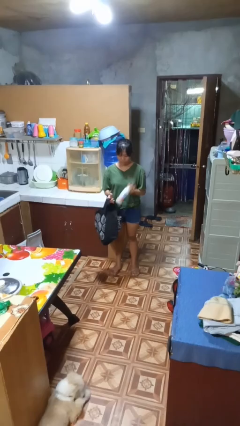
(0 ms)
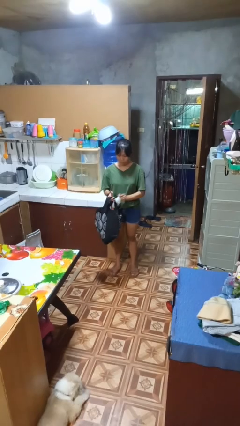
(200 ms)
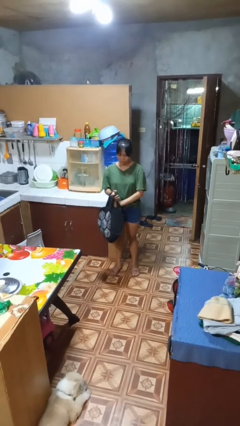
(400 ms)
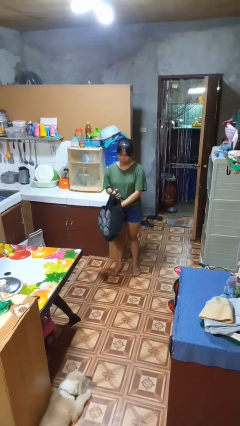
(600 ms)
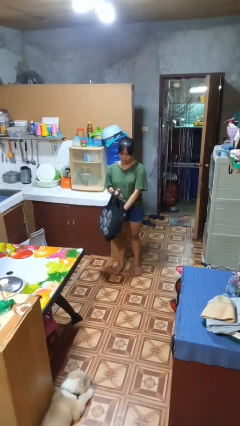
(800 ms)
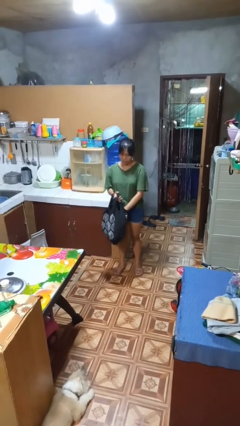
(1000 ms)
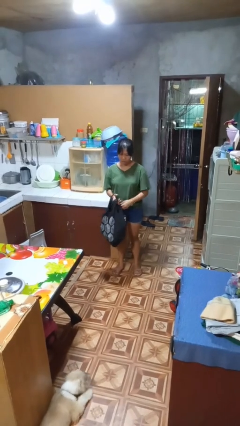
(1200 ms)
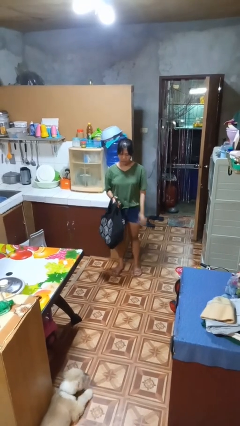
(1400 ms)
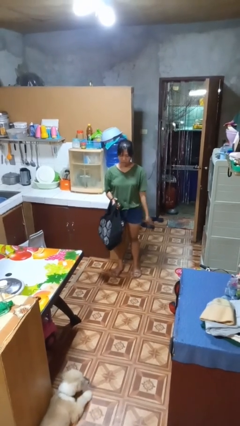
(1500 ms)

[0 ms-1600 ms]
person puts object into bag

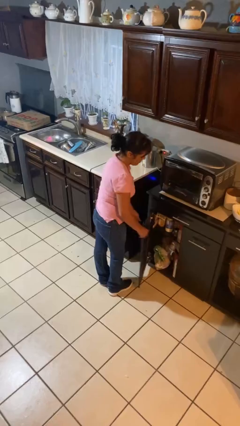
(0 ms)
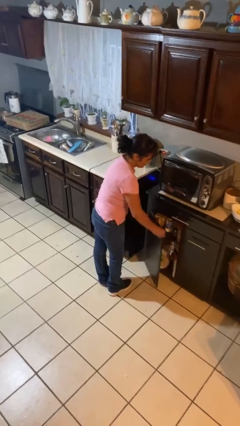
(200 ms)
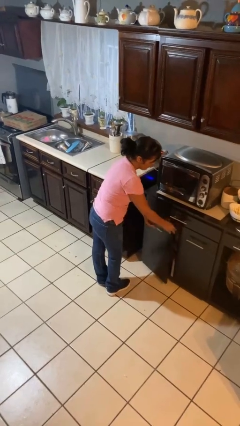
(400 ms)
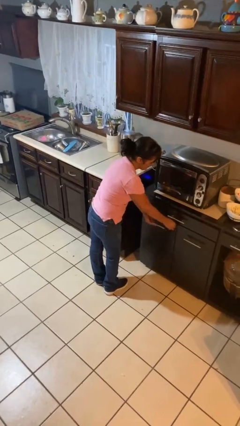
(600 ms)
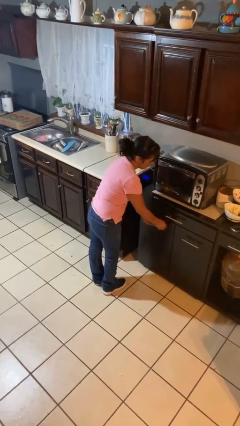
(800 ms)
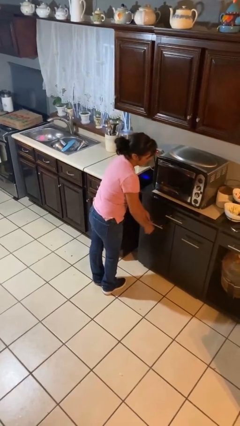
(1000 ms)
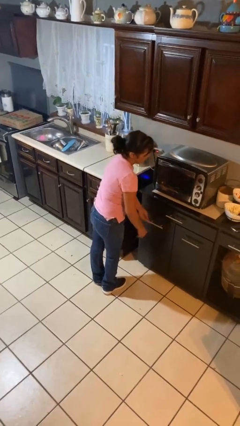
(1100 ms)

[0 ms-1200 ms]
person closes cabinet

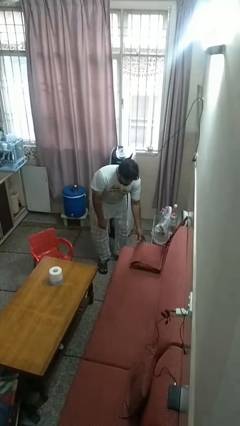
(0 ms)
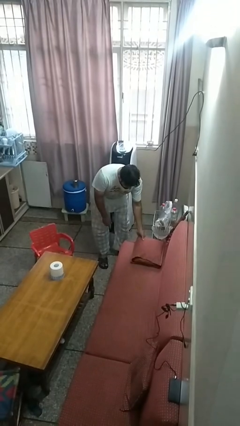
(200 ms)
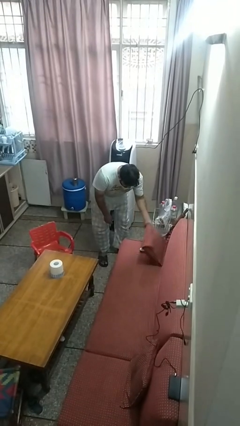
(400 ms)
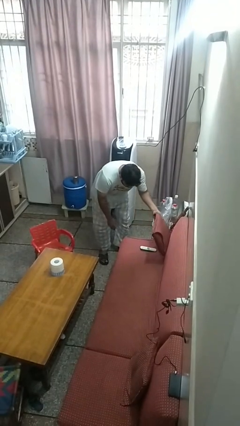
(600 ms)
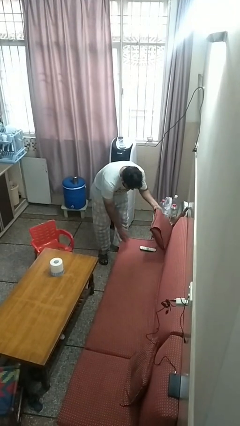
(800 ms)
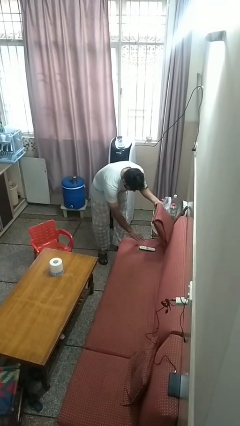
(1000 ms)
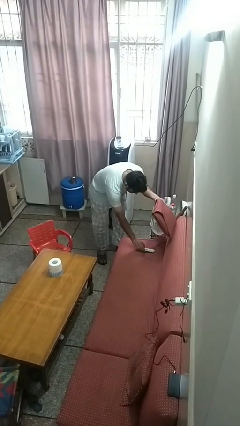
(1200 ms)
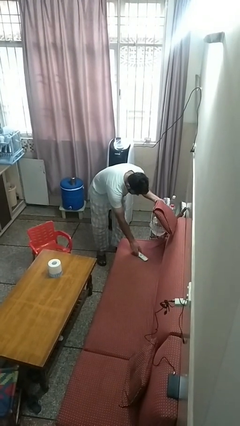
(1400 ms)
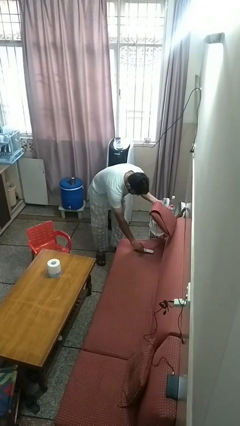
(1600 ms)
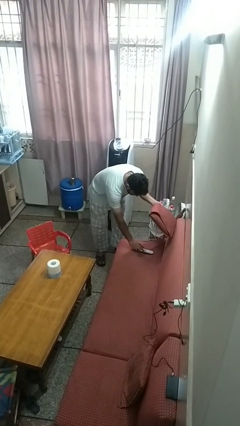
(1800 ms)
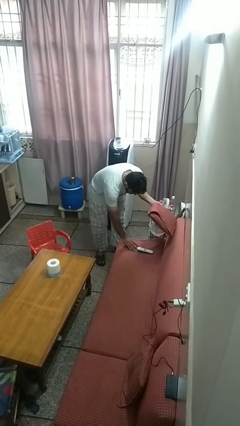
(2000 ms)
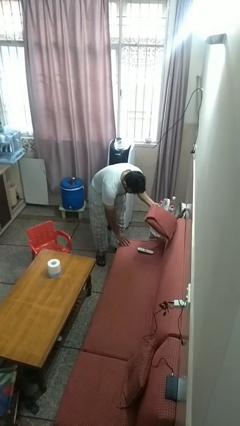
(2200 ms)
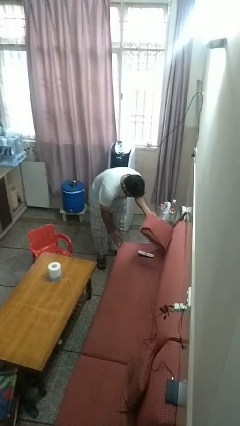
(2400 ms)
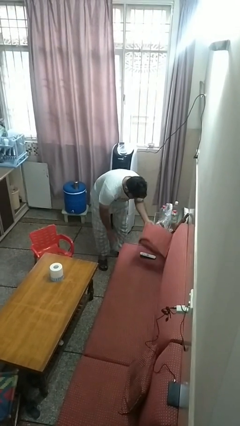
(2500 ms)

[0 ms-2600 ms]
person searches in couch

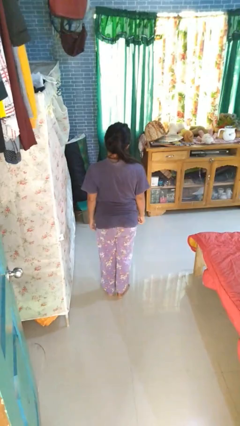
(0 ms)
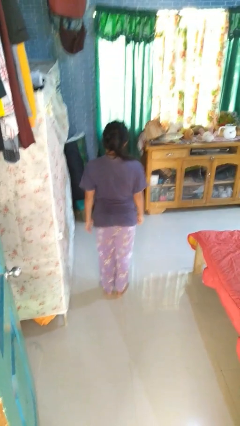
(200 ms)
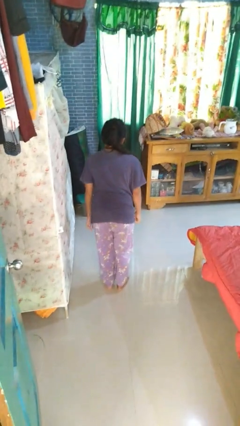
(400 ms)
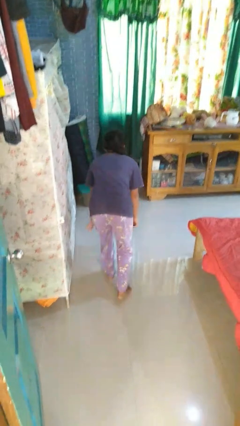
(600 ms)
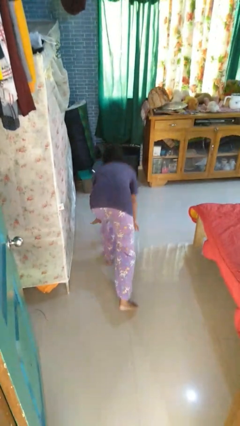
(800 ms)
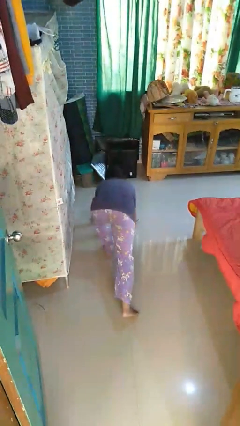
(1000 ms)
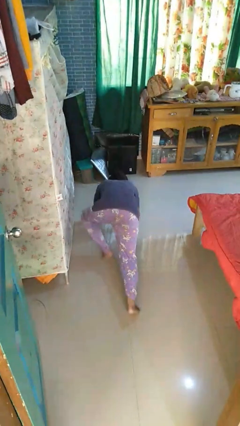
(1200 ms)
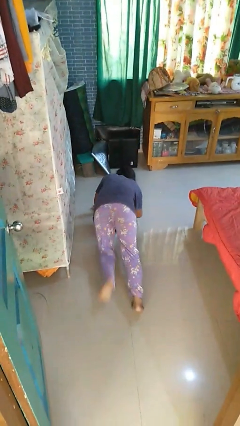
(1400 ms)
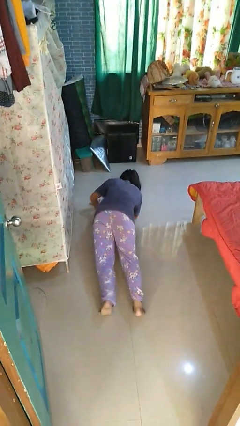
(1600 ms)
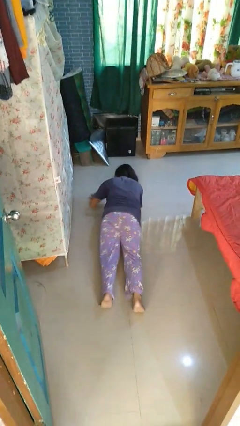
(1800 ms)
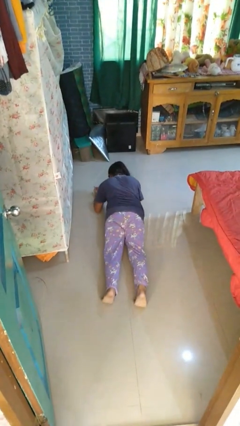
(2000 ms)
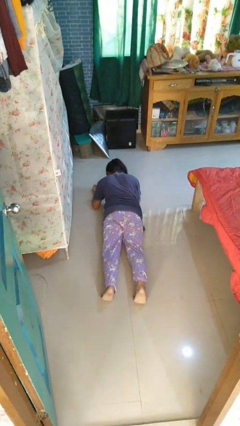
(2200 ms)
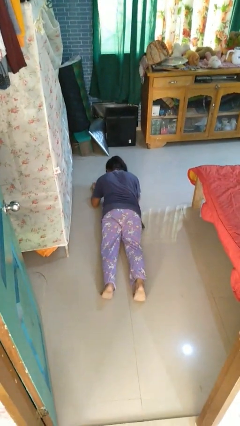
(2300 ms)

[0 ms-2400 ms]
person exercises with plank

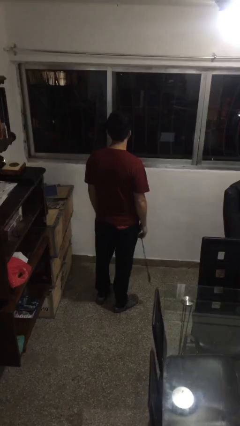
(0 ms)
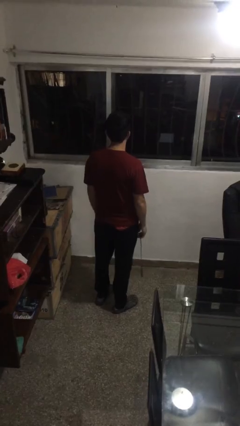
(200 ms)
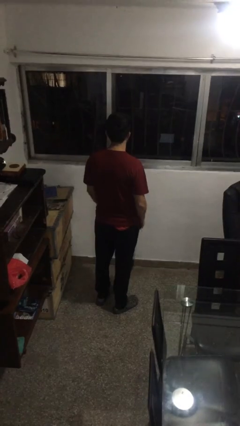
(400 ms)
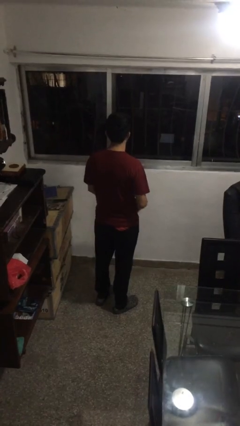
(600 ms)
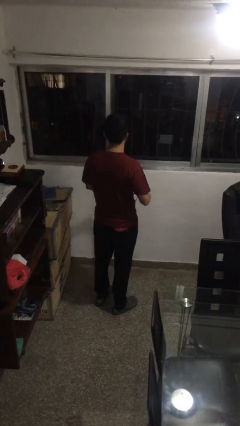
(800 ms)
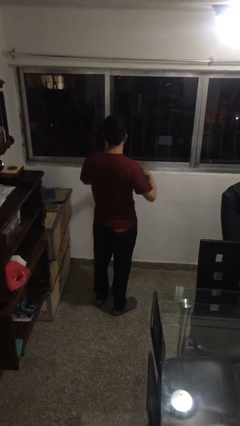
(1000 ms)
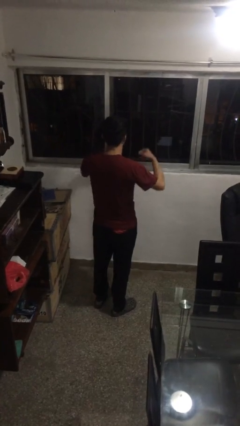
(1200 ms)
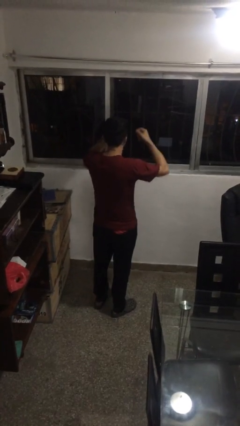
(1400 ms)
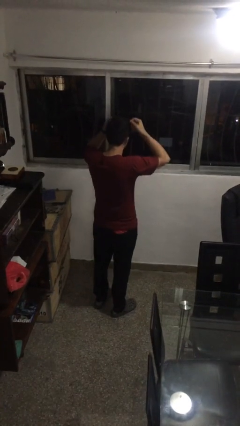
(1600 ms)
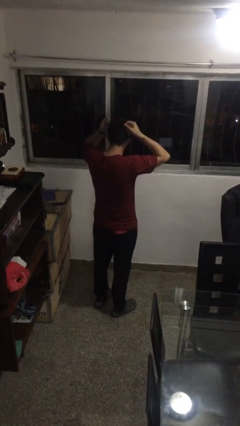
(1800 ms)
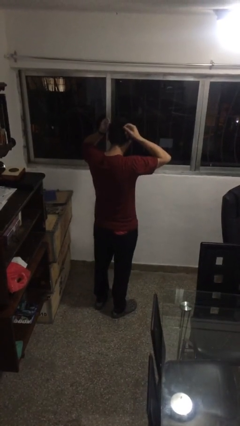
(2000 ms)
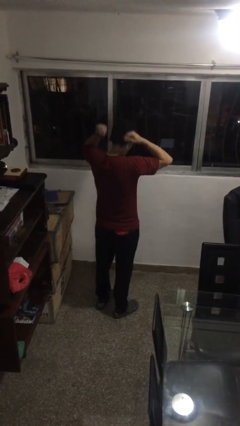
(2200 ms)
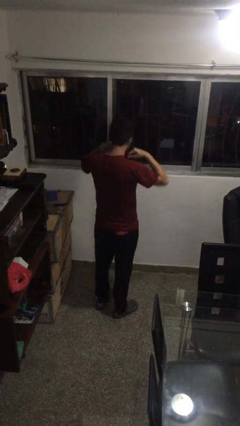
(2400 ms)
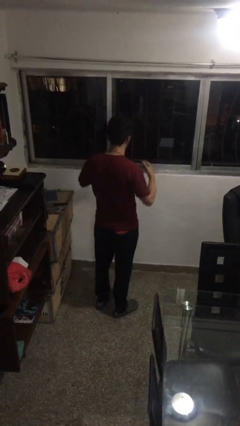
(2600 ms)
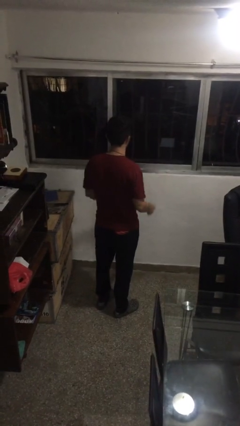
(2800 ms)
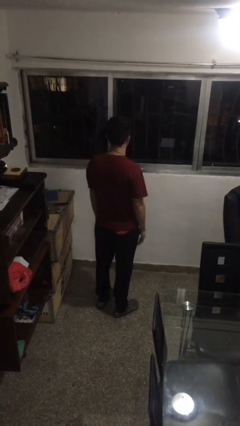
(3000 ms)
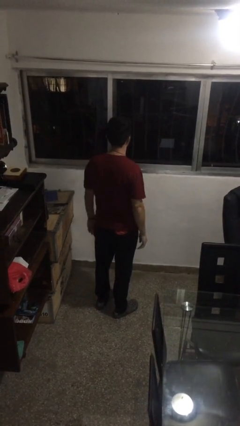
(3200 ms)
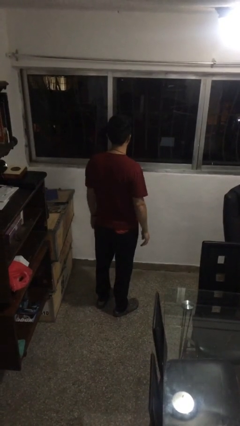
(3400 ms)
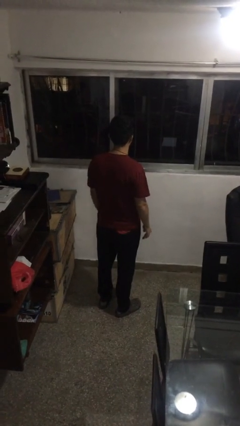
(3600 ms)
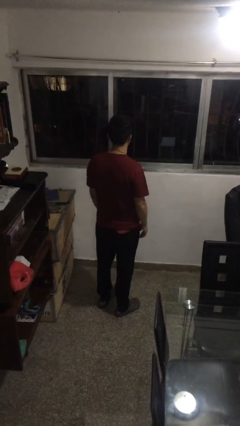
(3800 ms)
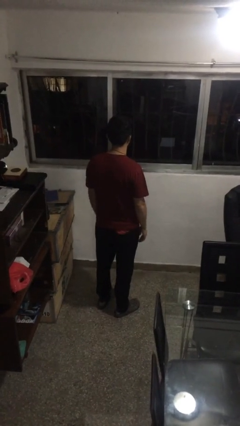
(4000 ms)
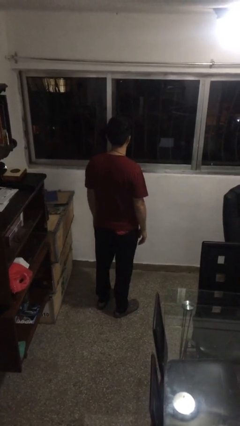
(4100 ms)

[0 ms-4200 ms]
person puts on necklace

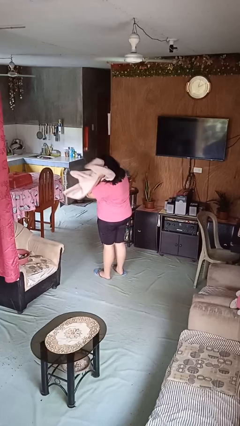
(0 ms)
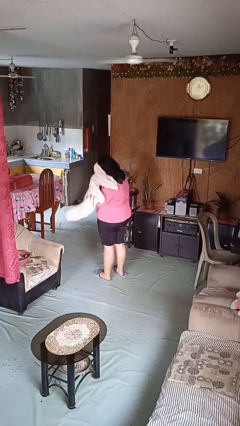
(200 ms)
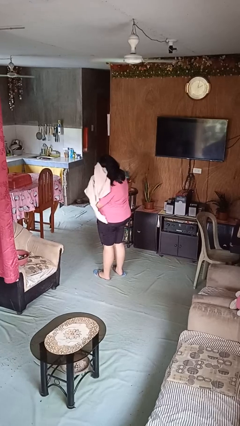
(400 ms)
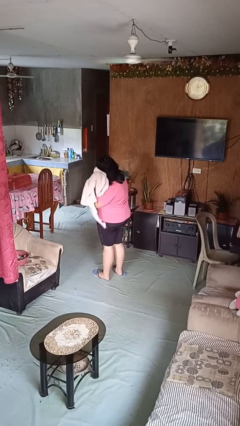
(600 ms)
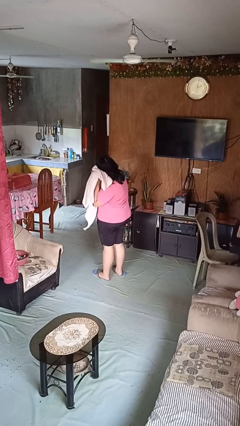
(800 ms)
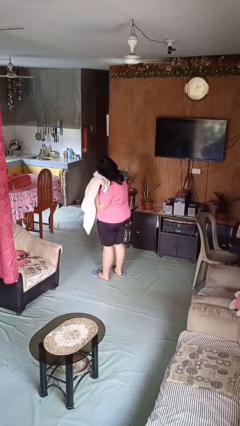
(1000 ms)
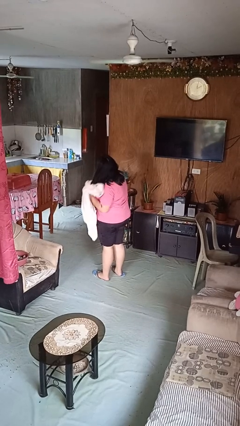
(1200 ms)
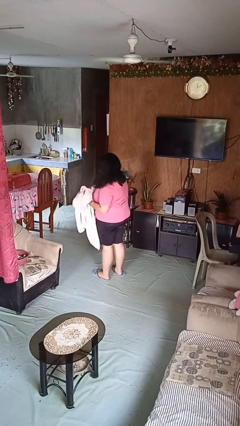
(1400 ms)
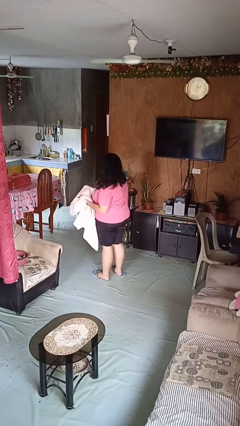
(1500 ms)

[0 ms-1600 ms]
person dries hair with towel

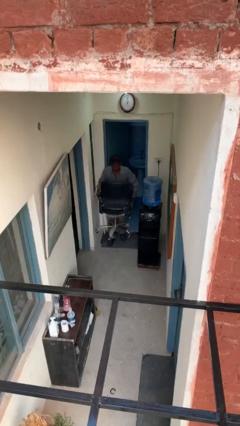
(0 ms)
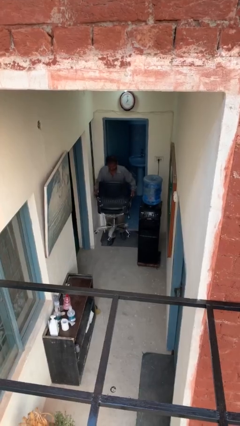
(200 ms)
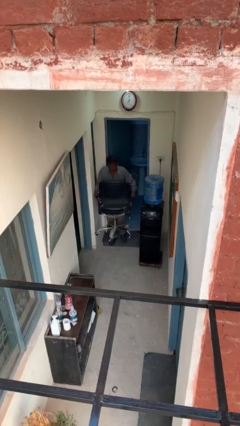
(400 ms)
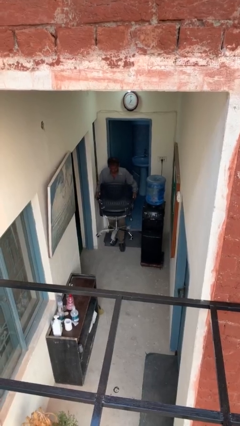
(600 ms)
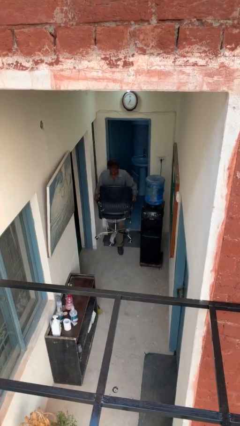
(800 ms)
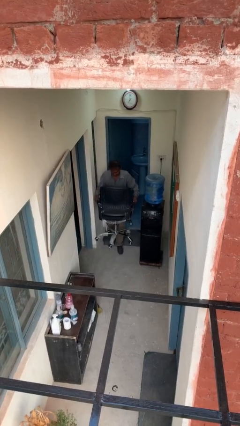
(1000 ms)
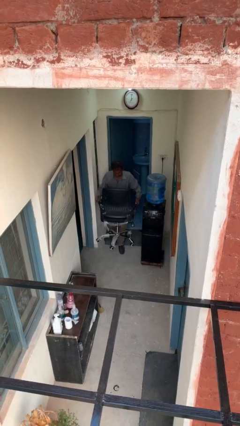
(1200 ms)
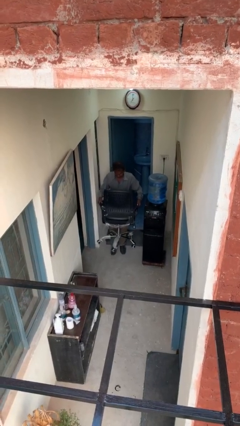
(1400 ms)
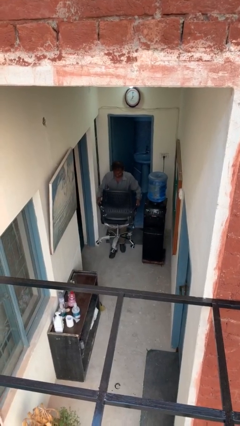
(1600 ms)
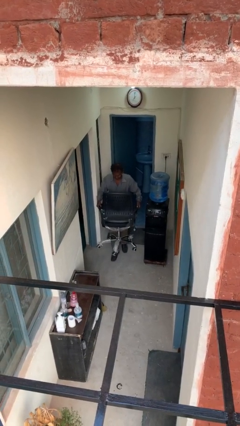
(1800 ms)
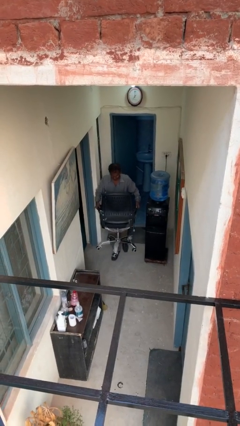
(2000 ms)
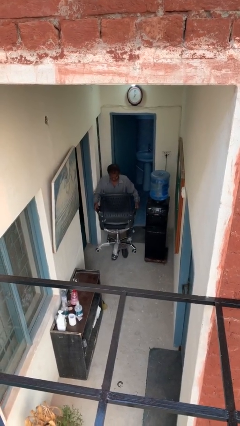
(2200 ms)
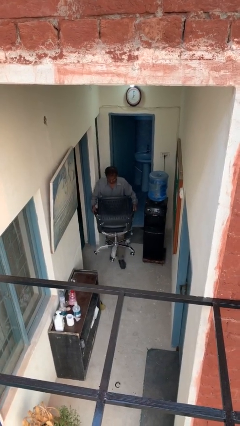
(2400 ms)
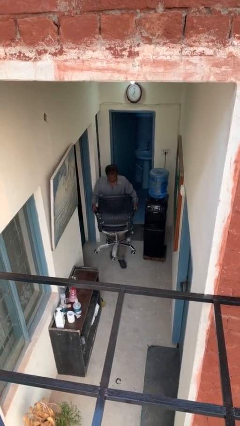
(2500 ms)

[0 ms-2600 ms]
person carries heavy object

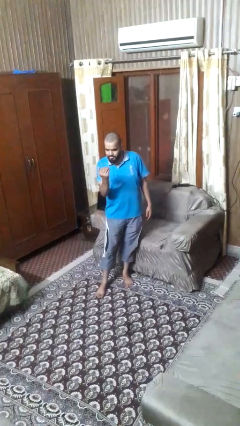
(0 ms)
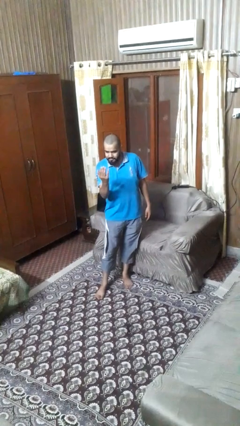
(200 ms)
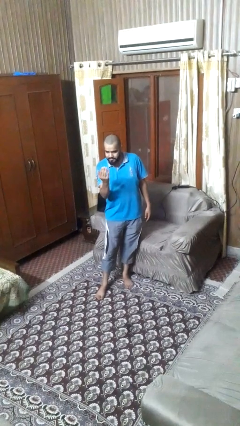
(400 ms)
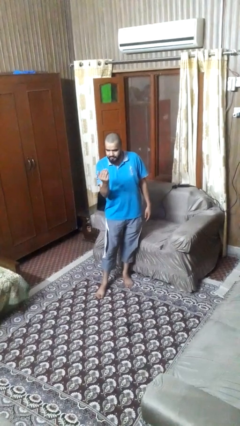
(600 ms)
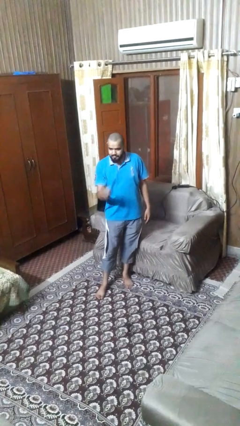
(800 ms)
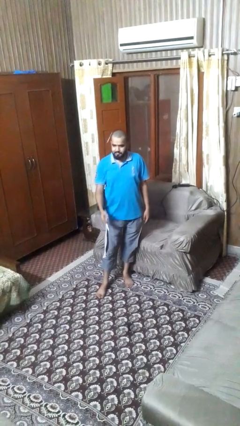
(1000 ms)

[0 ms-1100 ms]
person gestures come here
